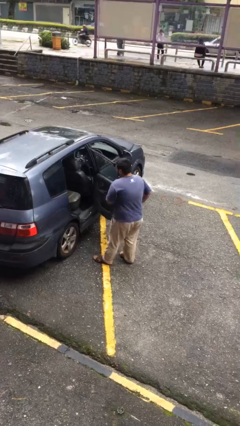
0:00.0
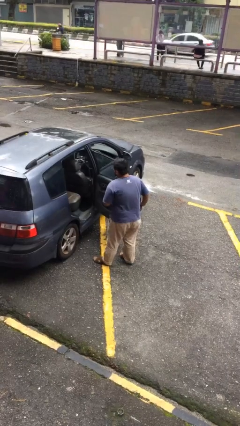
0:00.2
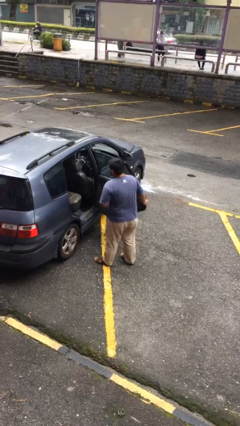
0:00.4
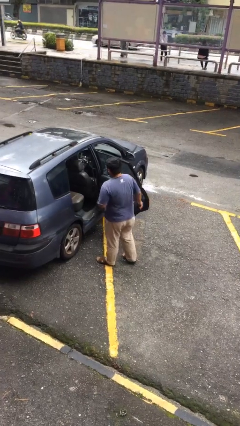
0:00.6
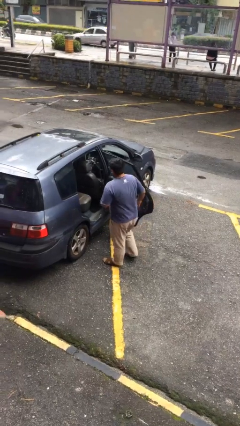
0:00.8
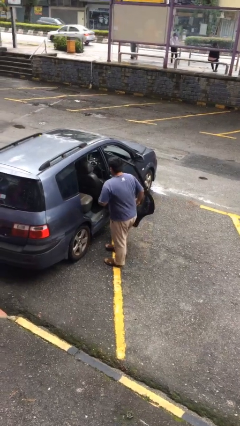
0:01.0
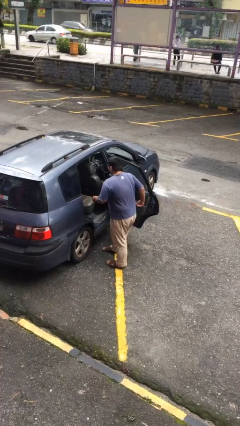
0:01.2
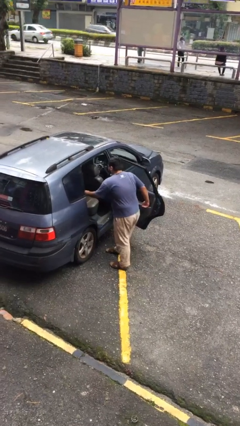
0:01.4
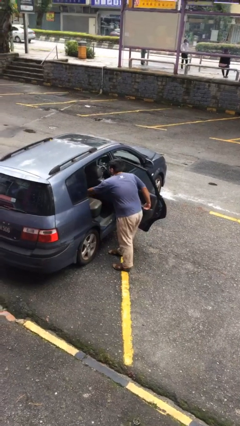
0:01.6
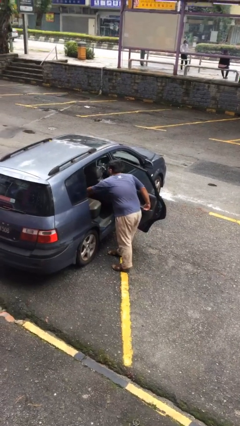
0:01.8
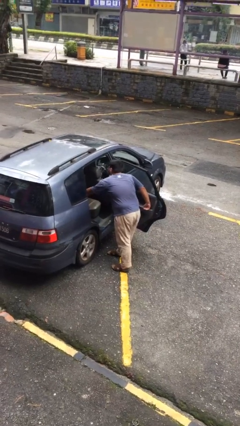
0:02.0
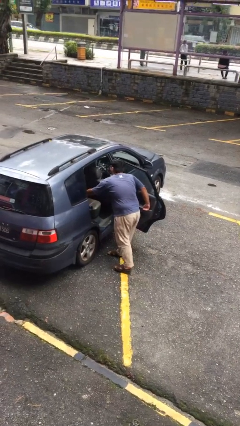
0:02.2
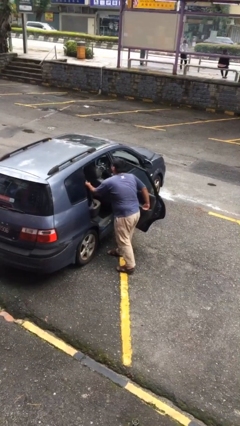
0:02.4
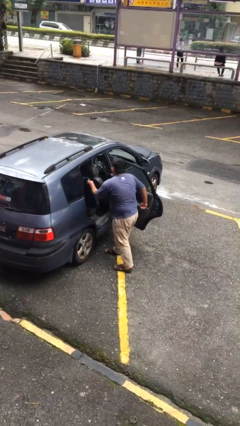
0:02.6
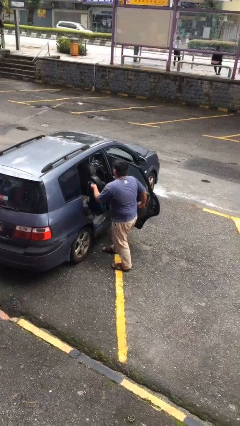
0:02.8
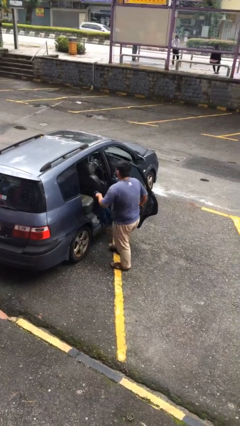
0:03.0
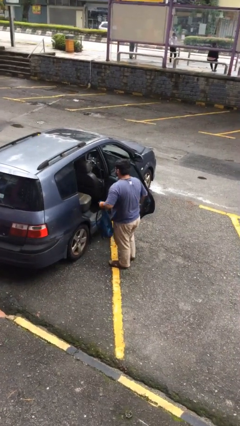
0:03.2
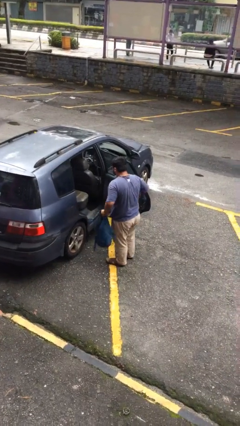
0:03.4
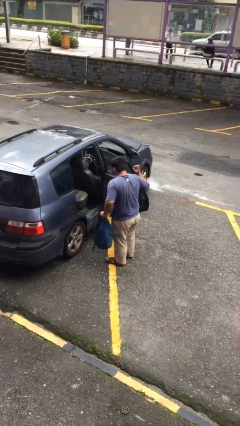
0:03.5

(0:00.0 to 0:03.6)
person unloads car

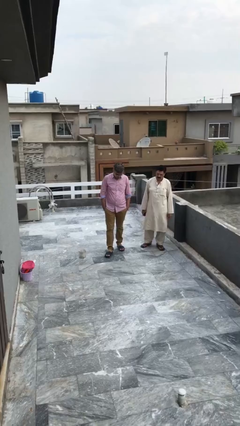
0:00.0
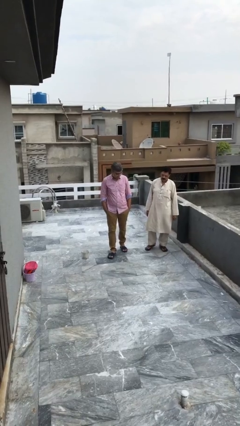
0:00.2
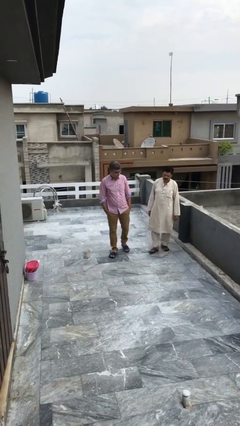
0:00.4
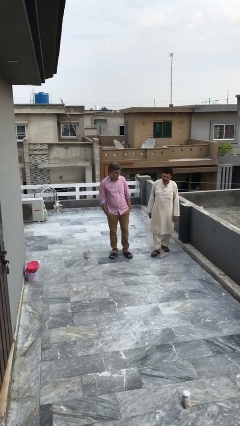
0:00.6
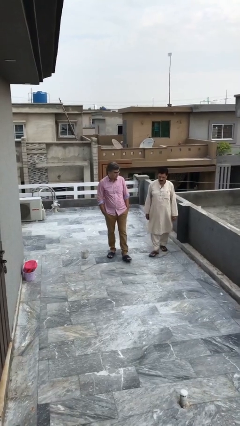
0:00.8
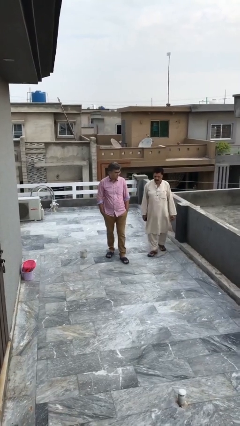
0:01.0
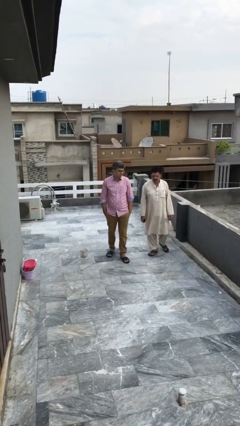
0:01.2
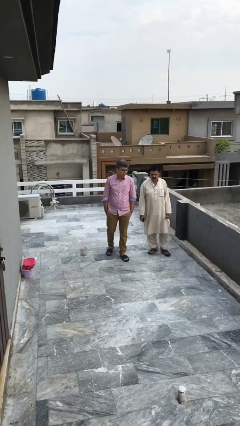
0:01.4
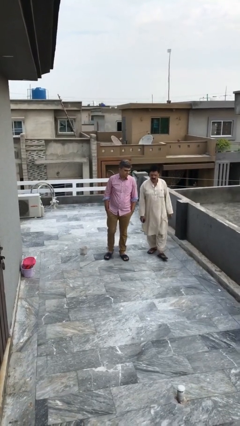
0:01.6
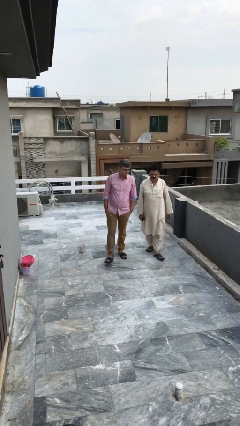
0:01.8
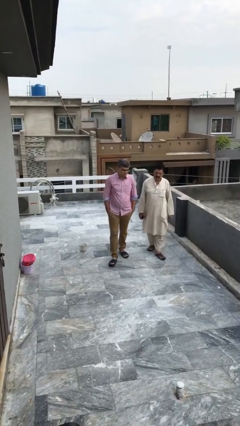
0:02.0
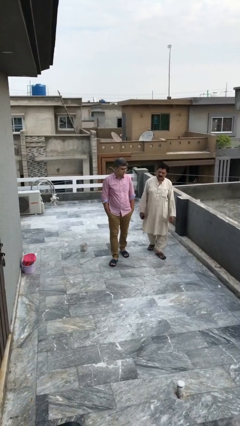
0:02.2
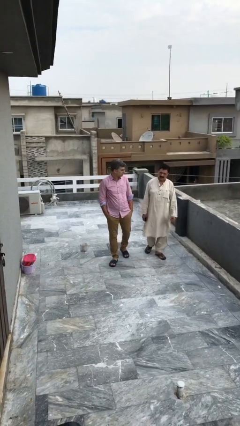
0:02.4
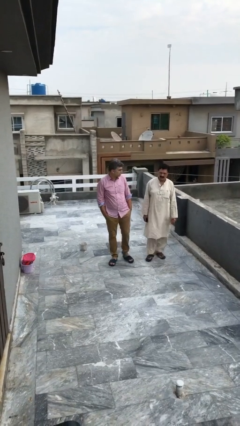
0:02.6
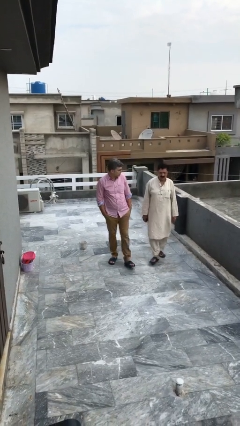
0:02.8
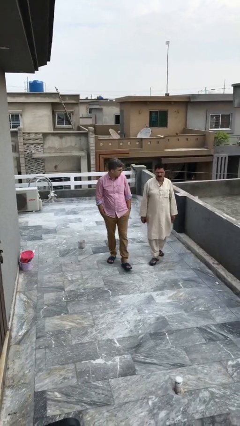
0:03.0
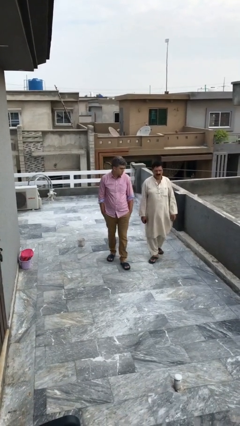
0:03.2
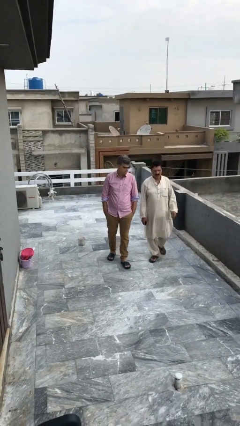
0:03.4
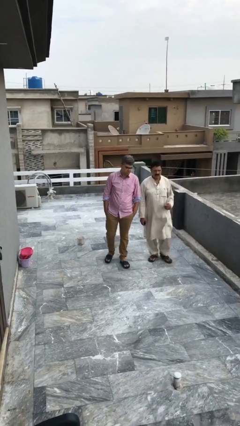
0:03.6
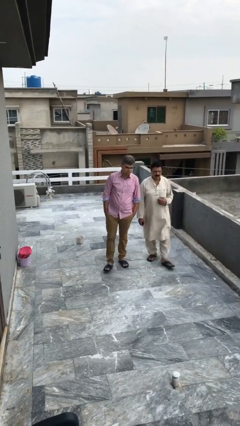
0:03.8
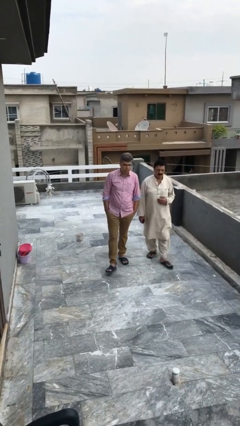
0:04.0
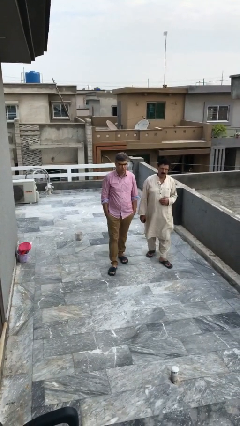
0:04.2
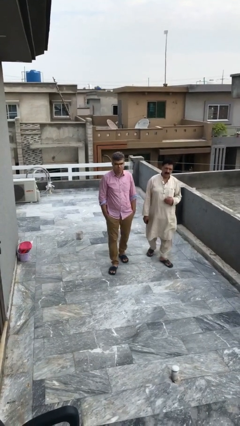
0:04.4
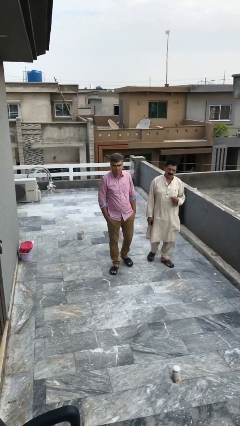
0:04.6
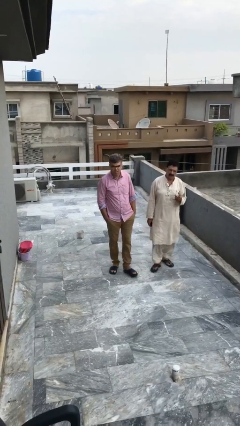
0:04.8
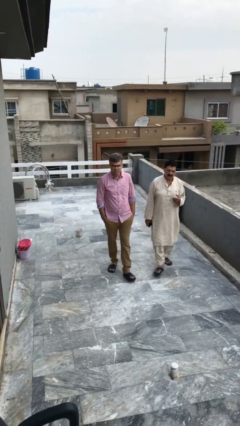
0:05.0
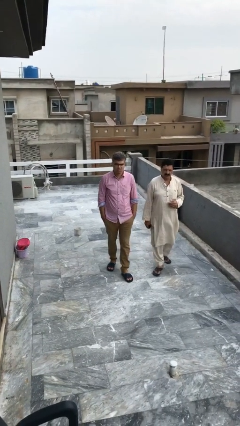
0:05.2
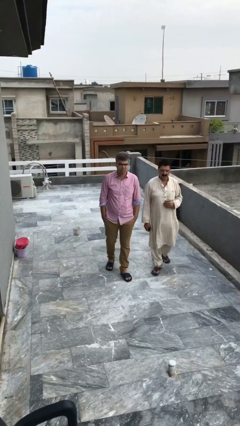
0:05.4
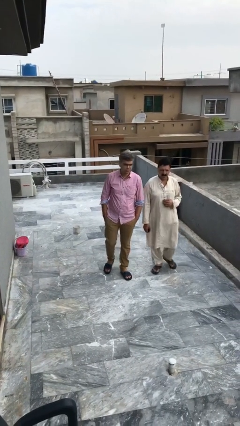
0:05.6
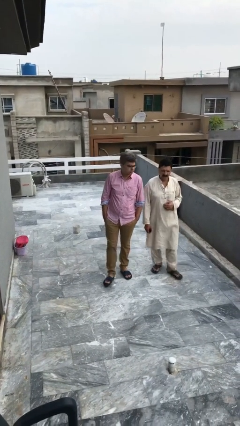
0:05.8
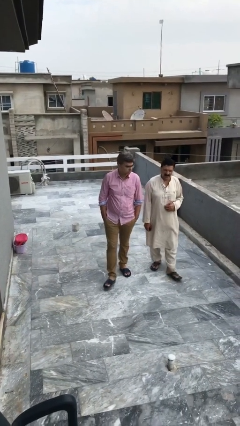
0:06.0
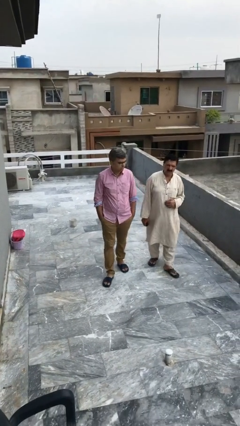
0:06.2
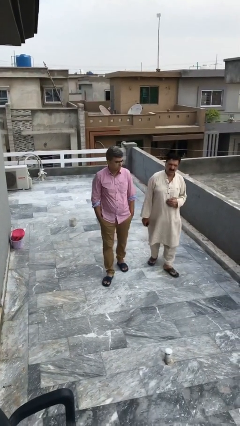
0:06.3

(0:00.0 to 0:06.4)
person talks to person

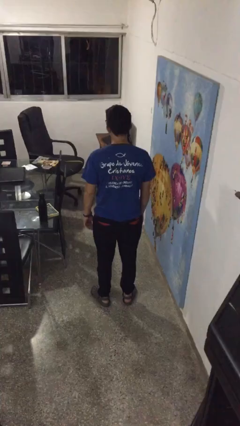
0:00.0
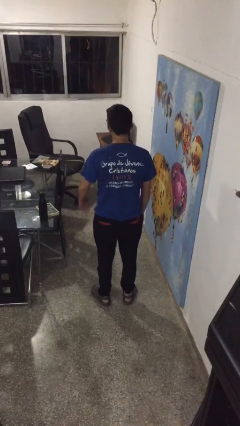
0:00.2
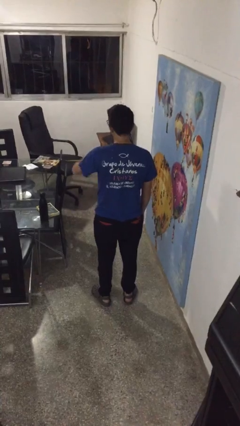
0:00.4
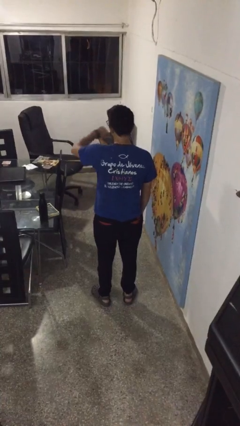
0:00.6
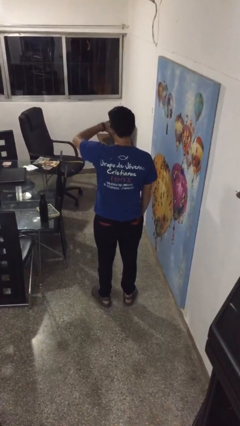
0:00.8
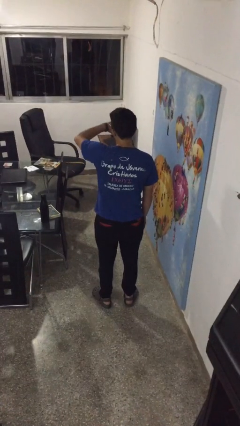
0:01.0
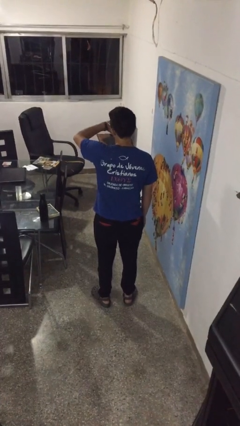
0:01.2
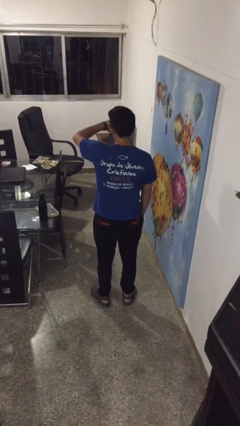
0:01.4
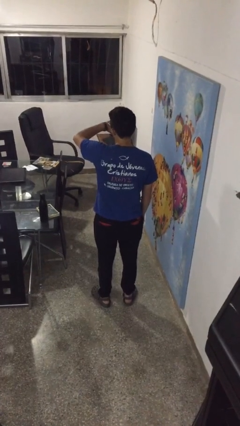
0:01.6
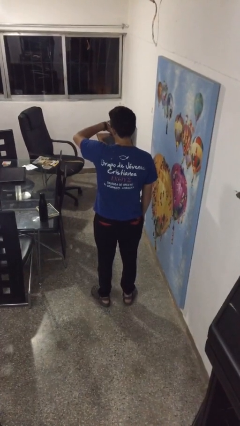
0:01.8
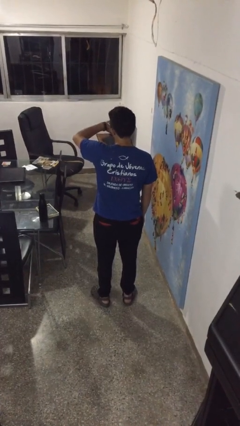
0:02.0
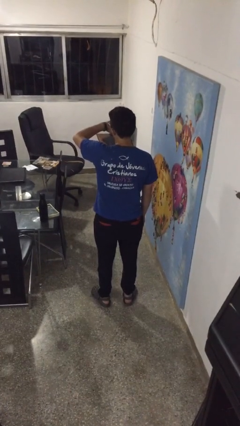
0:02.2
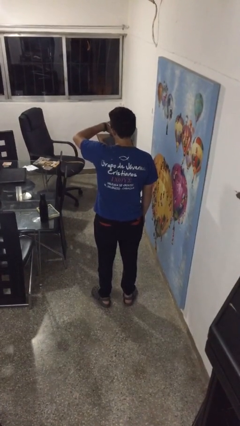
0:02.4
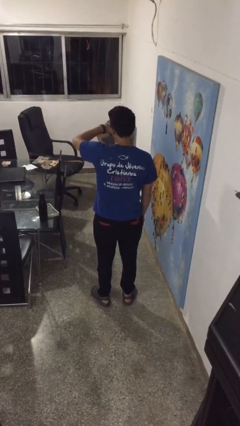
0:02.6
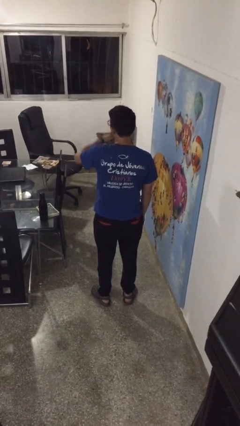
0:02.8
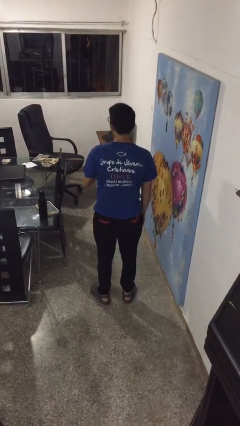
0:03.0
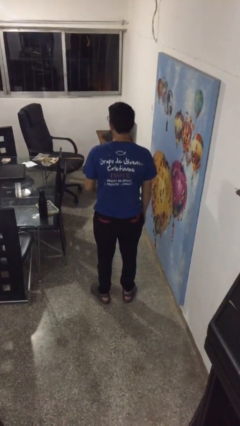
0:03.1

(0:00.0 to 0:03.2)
person looks at wristwatch

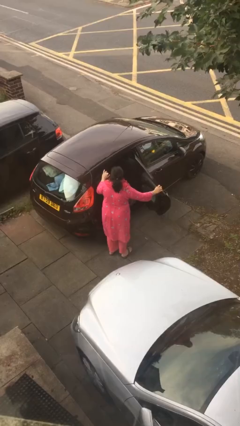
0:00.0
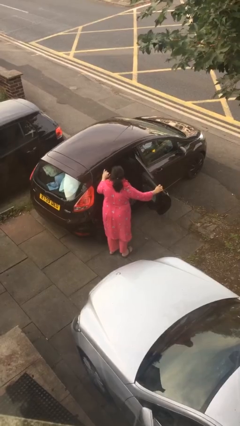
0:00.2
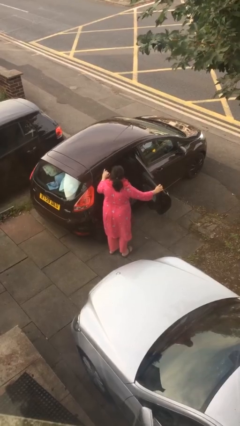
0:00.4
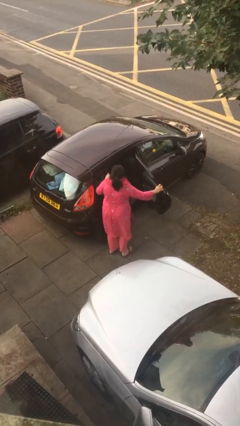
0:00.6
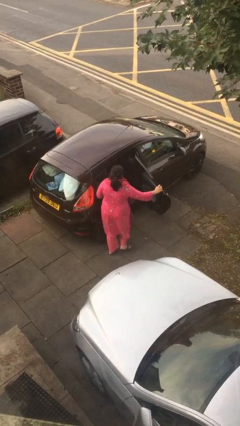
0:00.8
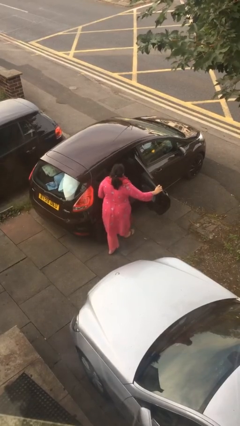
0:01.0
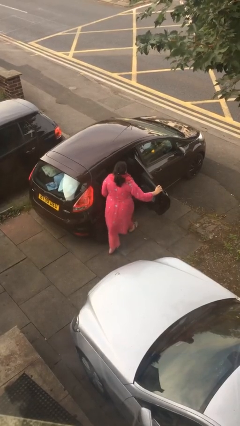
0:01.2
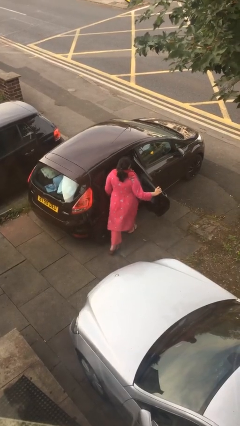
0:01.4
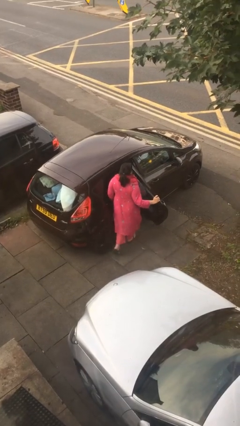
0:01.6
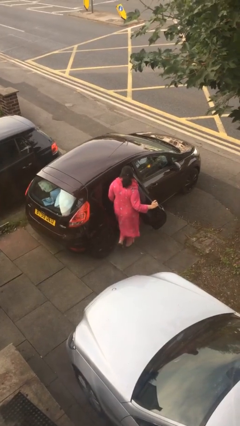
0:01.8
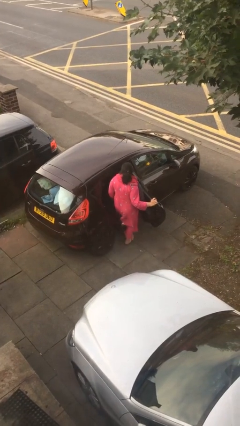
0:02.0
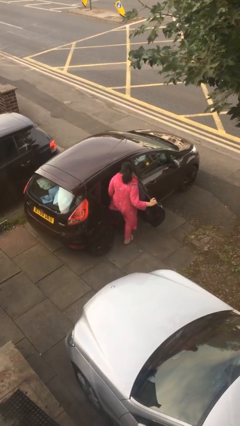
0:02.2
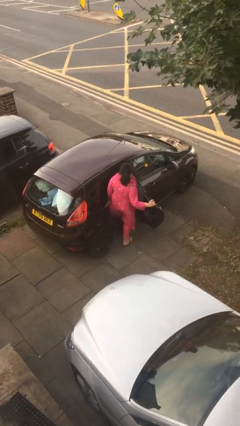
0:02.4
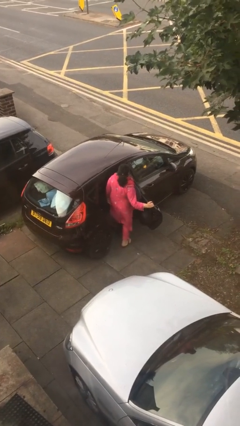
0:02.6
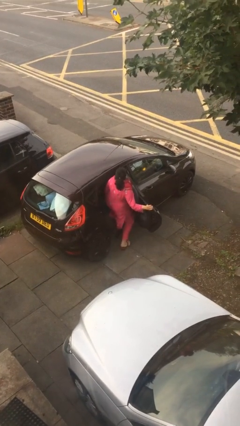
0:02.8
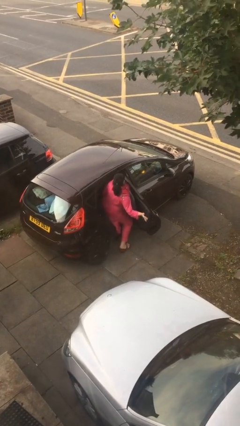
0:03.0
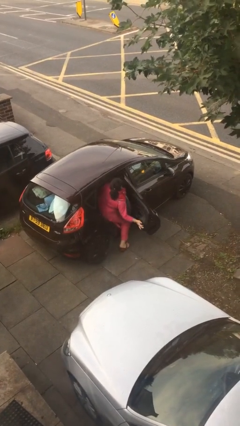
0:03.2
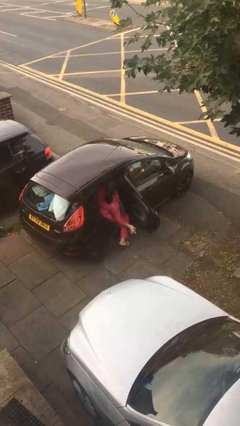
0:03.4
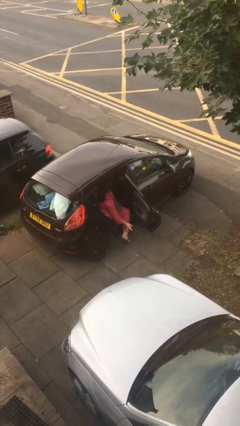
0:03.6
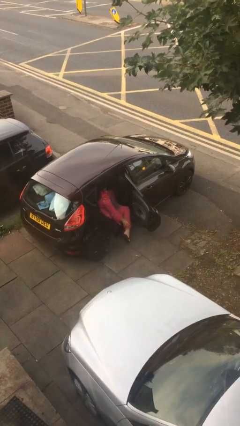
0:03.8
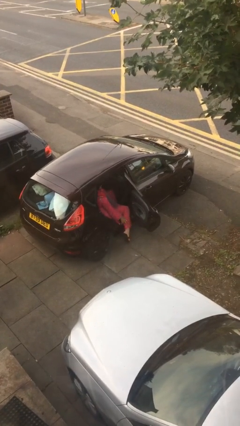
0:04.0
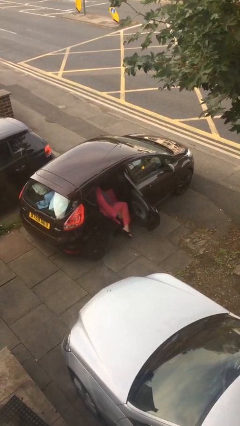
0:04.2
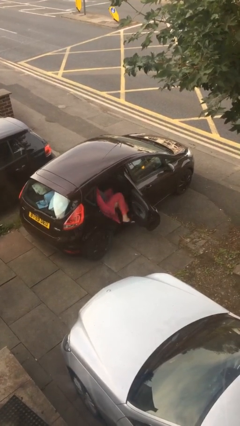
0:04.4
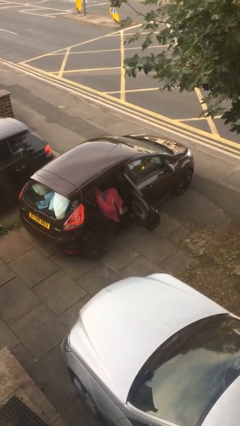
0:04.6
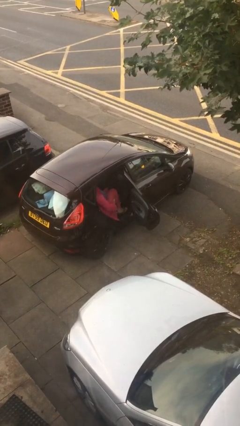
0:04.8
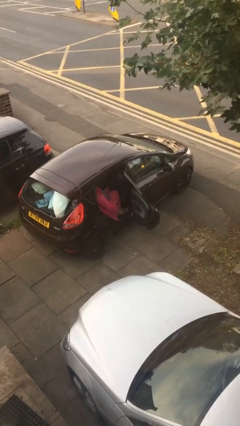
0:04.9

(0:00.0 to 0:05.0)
person enters car
